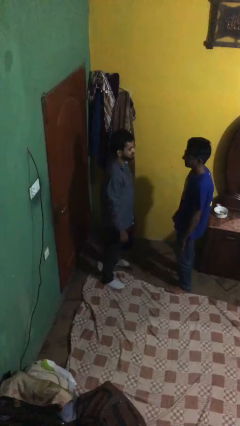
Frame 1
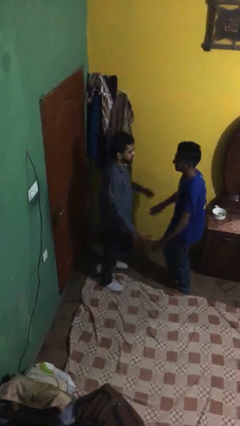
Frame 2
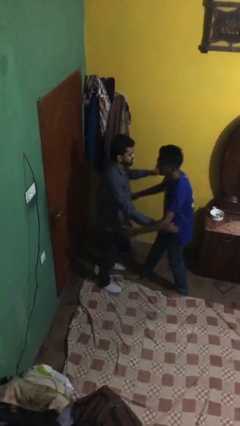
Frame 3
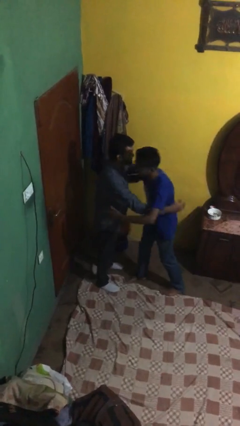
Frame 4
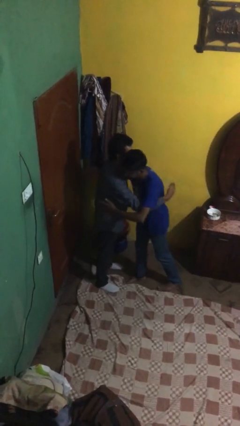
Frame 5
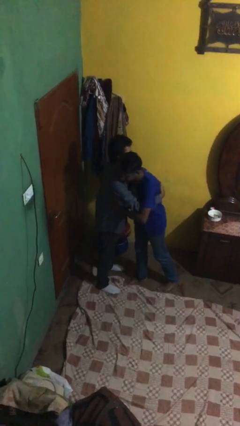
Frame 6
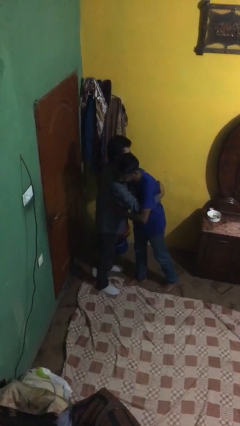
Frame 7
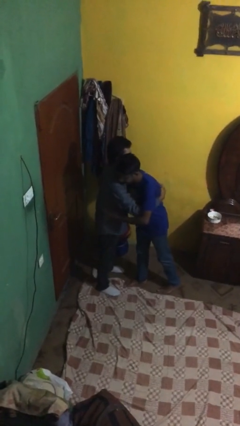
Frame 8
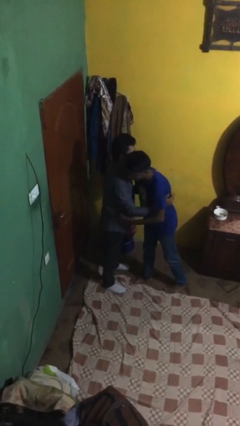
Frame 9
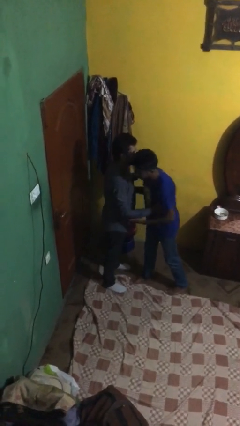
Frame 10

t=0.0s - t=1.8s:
person embraces person

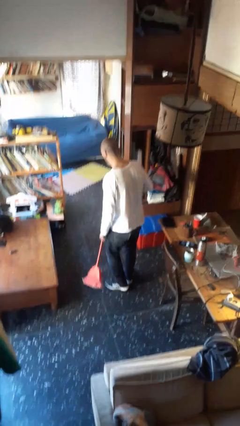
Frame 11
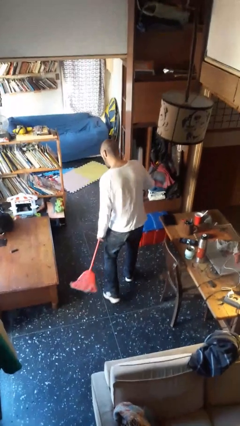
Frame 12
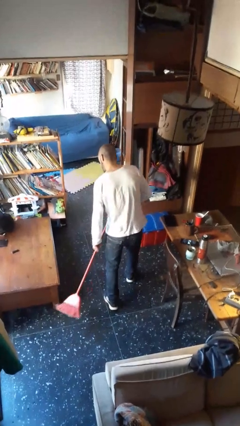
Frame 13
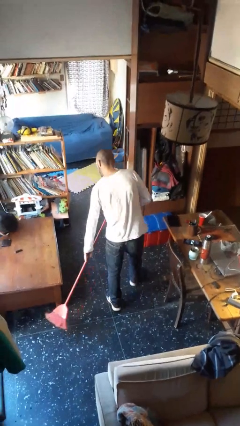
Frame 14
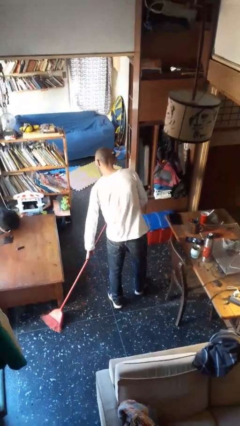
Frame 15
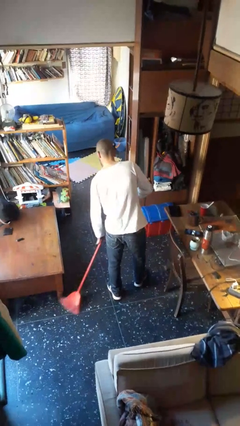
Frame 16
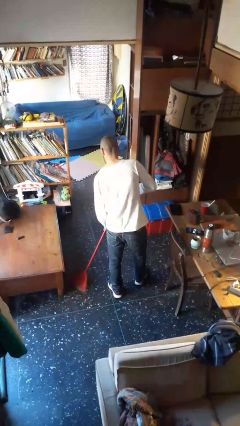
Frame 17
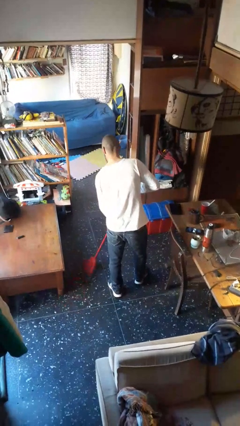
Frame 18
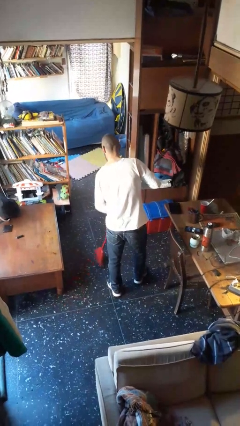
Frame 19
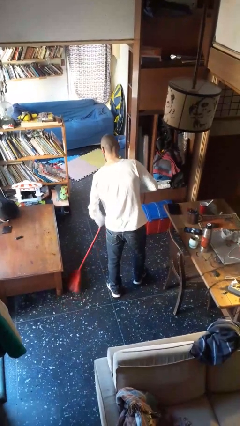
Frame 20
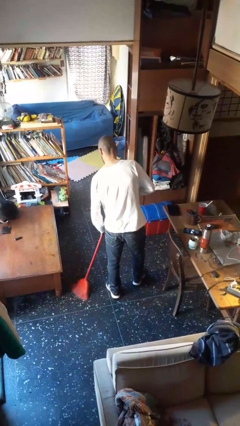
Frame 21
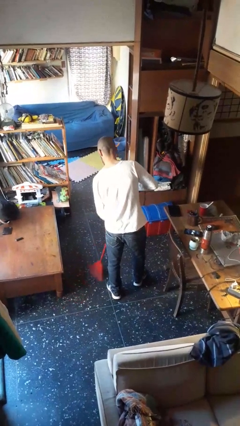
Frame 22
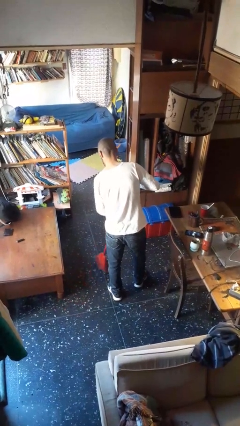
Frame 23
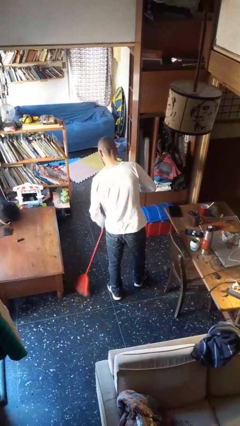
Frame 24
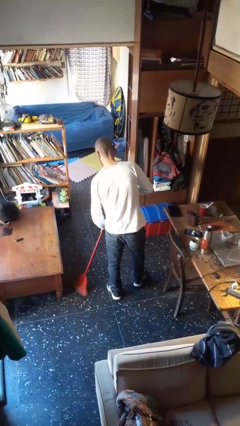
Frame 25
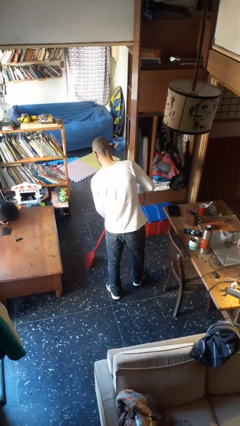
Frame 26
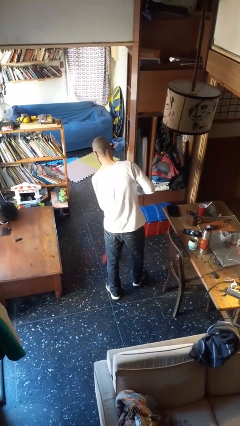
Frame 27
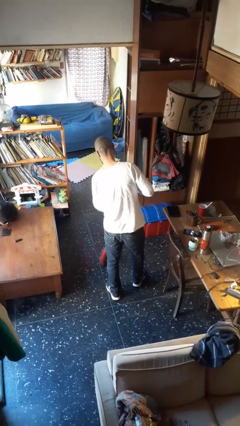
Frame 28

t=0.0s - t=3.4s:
person sweeps floor

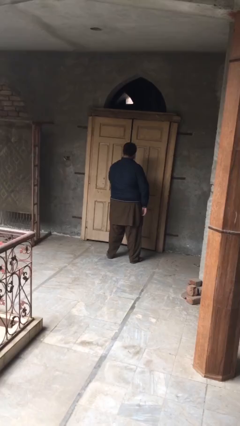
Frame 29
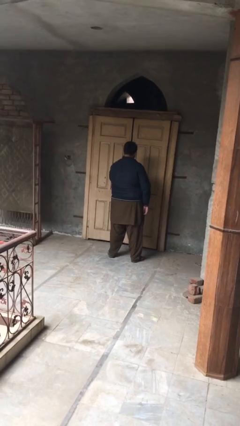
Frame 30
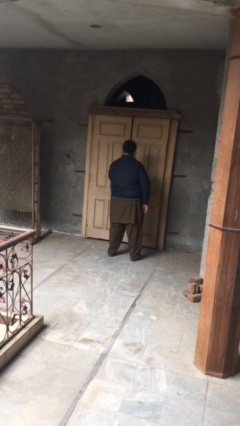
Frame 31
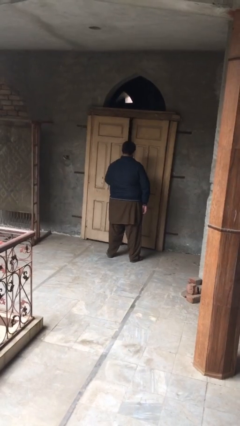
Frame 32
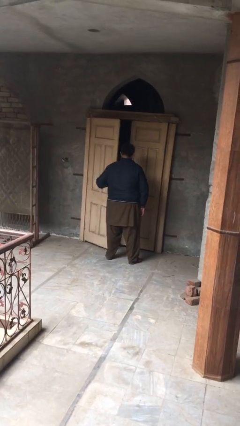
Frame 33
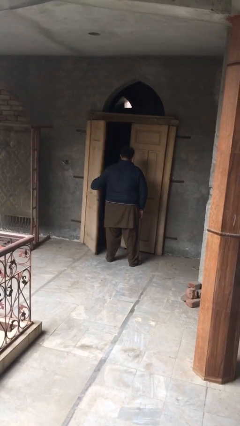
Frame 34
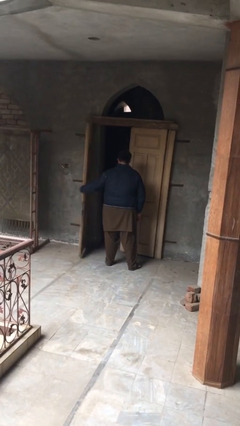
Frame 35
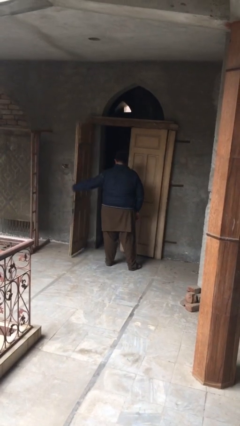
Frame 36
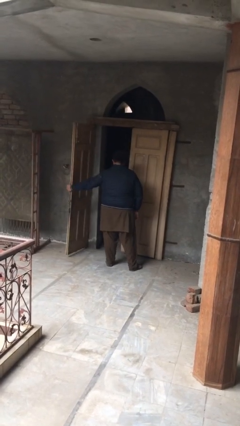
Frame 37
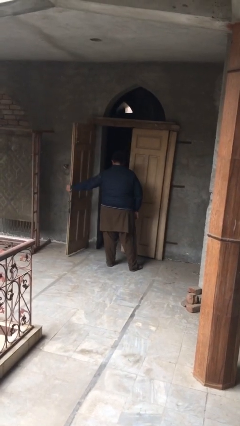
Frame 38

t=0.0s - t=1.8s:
person opens facility door

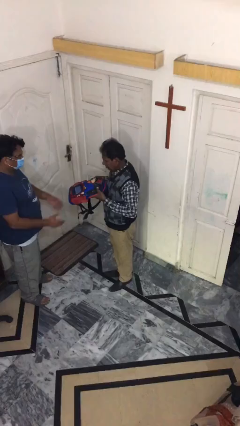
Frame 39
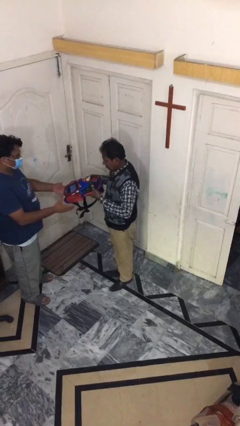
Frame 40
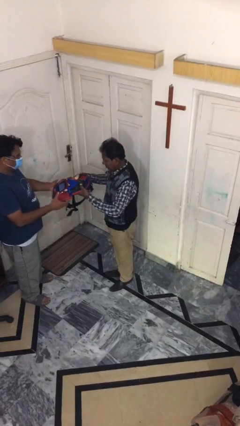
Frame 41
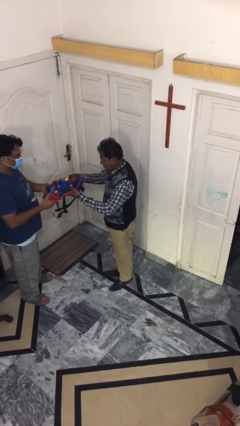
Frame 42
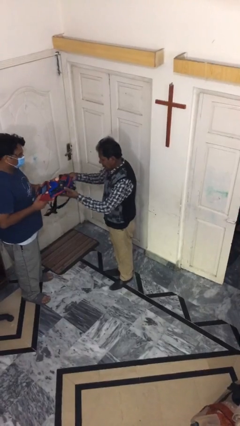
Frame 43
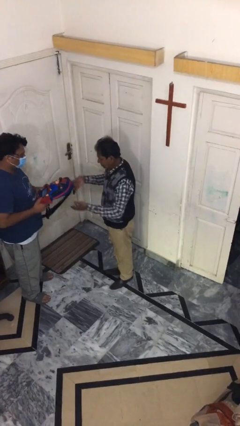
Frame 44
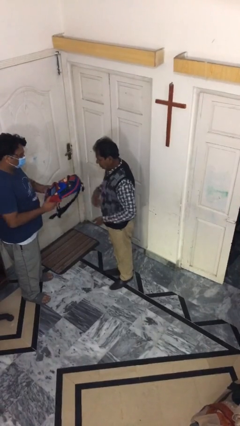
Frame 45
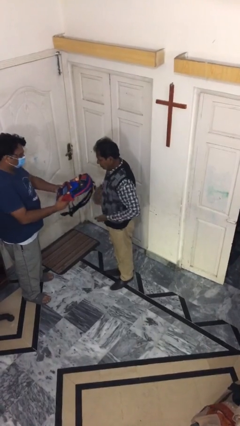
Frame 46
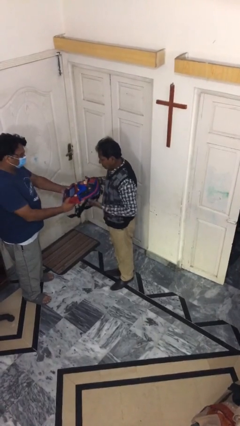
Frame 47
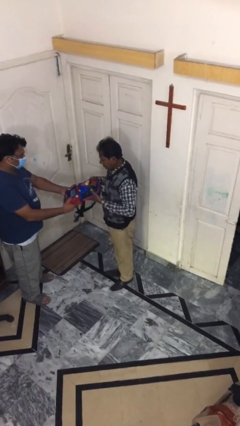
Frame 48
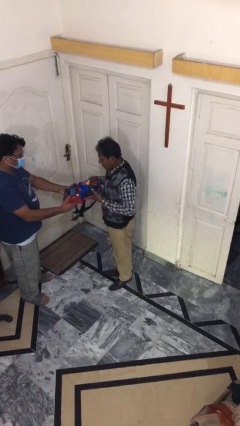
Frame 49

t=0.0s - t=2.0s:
person transfers object to person

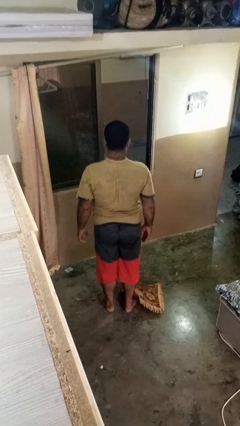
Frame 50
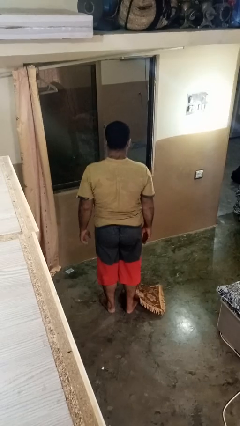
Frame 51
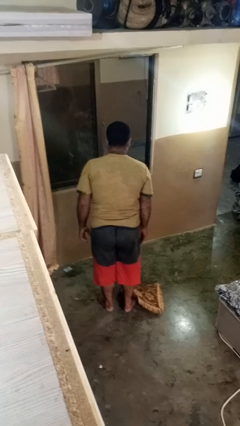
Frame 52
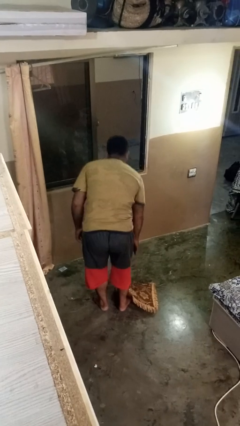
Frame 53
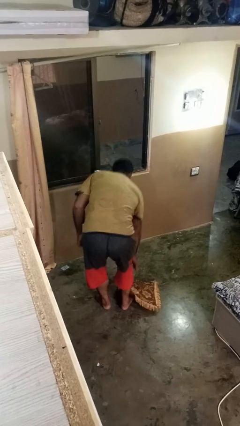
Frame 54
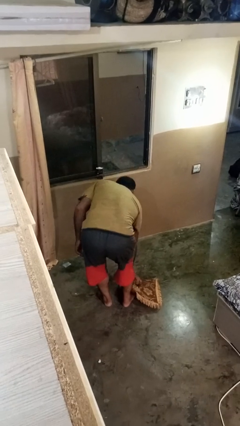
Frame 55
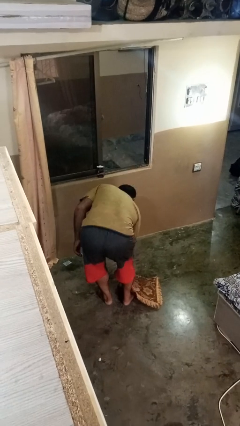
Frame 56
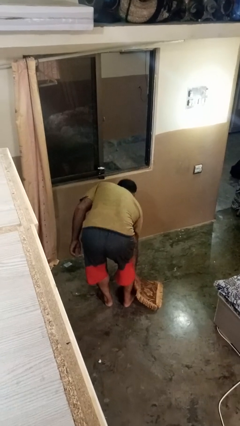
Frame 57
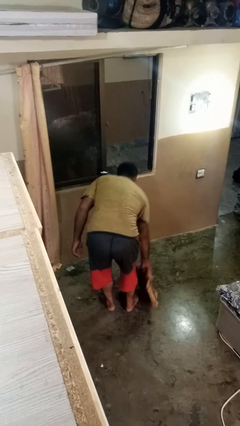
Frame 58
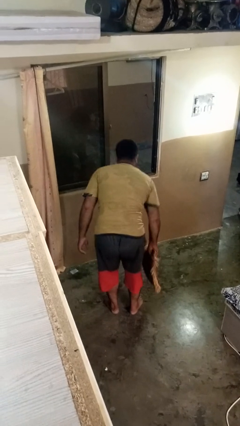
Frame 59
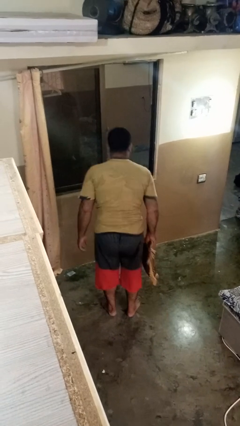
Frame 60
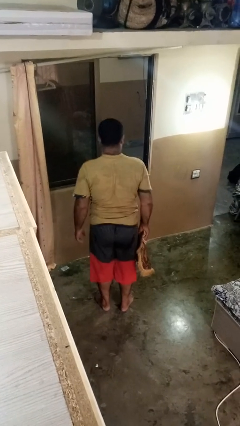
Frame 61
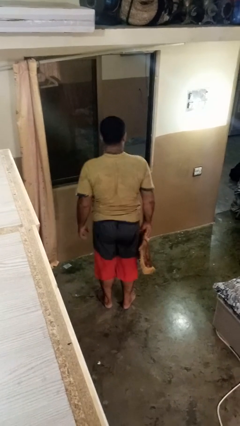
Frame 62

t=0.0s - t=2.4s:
person picks up object from floor

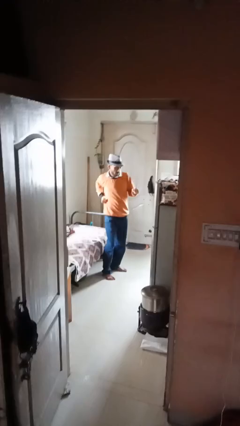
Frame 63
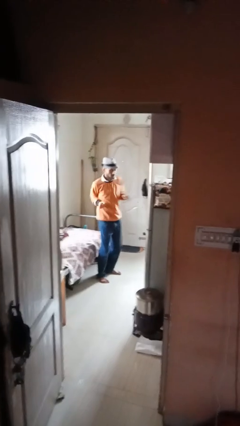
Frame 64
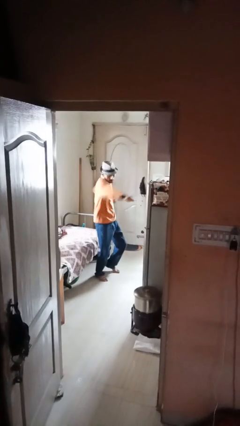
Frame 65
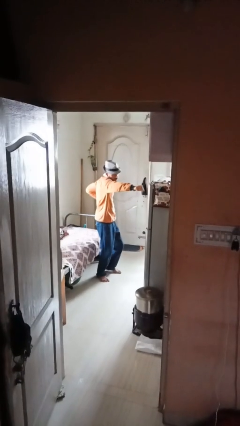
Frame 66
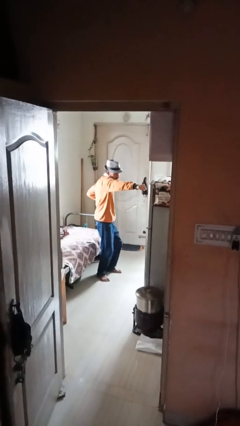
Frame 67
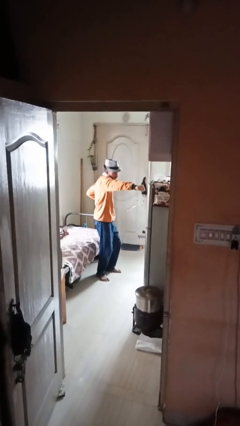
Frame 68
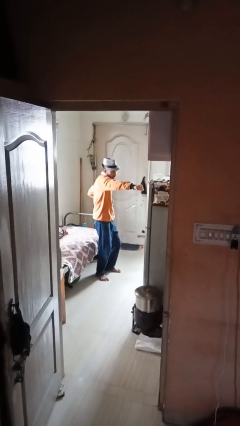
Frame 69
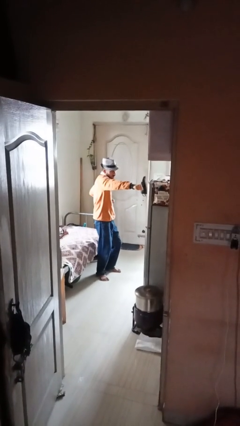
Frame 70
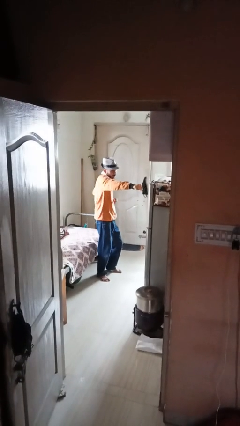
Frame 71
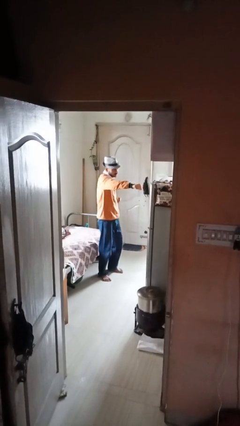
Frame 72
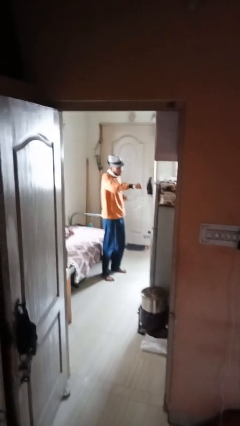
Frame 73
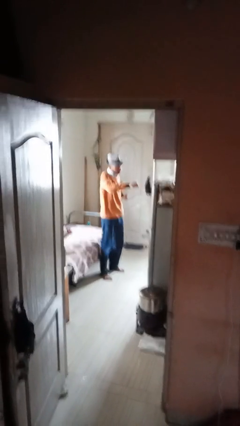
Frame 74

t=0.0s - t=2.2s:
person punches

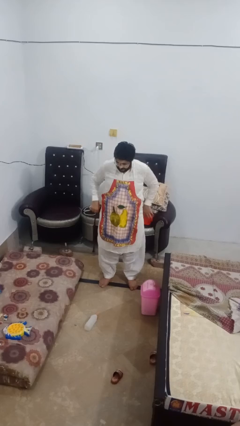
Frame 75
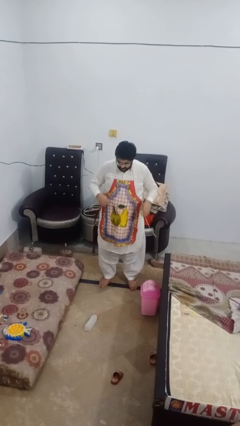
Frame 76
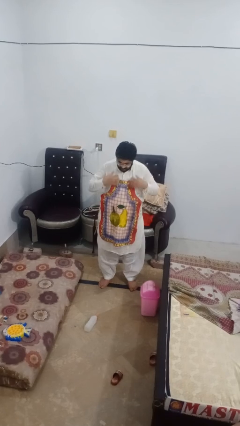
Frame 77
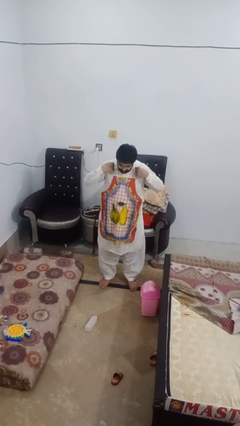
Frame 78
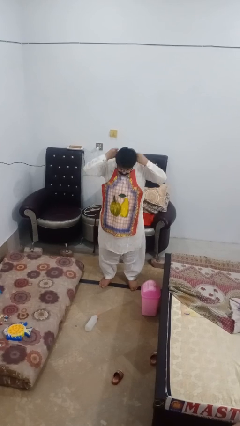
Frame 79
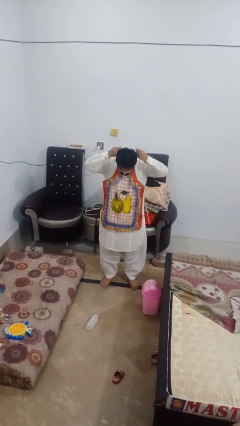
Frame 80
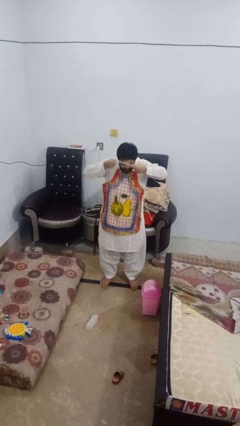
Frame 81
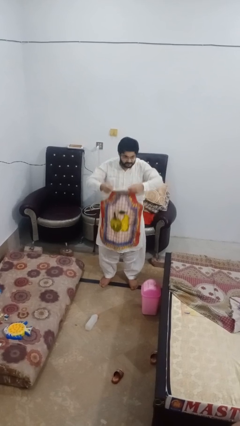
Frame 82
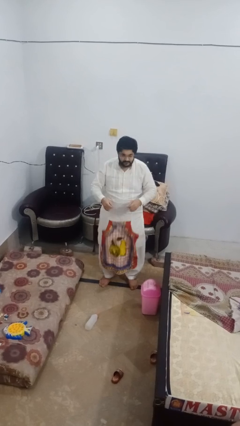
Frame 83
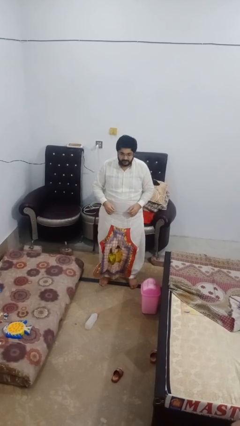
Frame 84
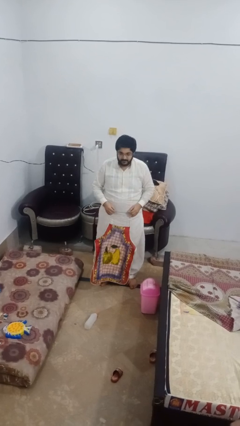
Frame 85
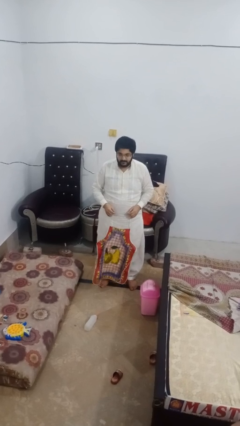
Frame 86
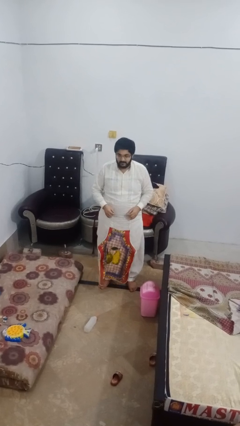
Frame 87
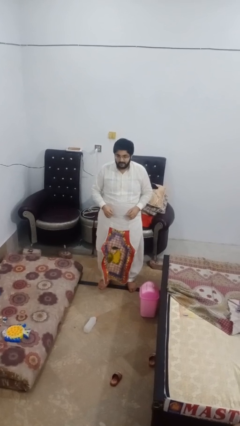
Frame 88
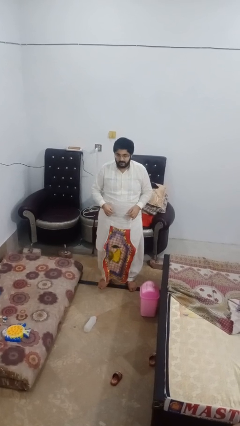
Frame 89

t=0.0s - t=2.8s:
person takes off apron

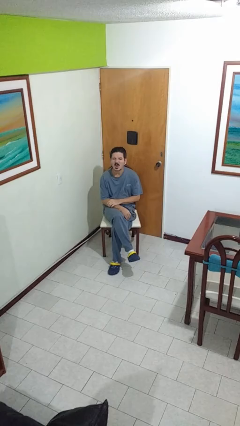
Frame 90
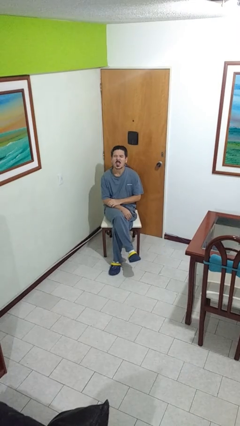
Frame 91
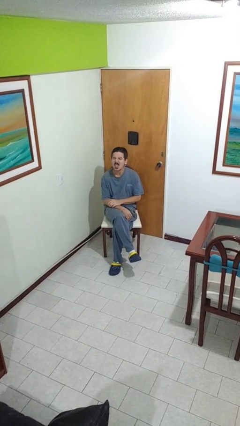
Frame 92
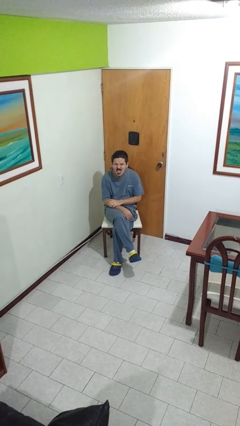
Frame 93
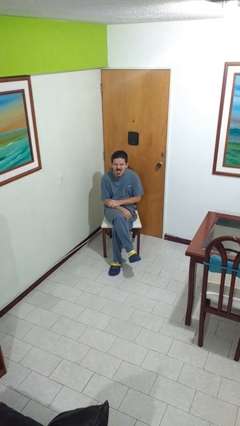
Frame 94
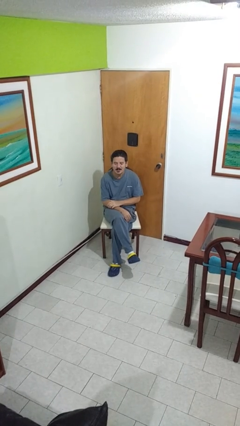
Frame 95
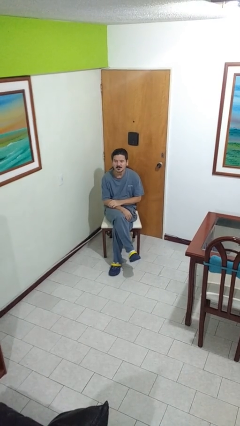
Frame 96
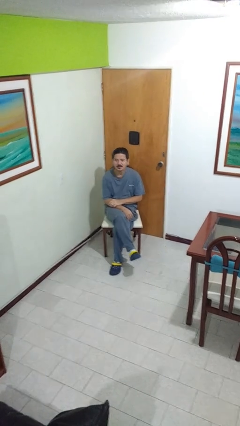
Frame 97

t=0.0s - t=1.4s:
person sticks out tongue
